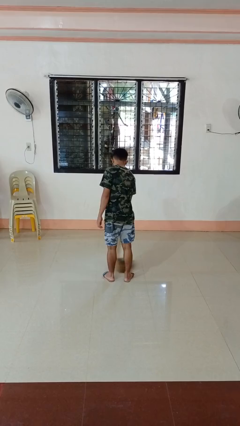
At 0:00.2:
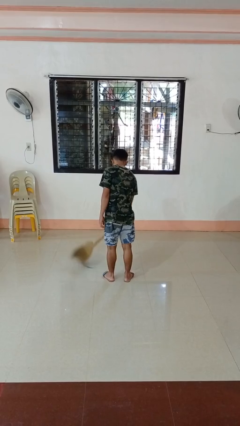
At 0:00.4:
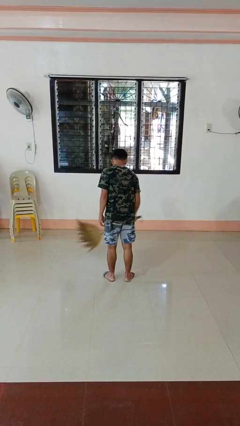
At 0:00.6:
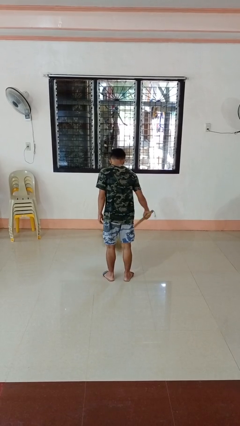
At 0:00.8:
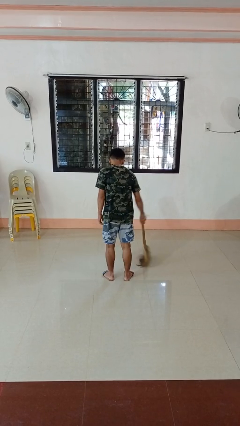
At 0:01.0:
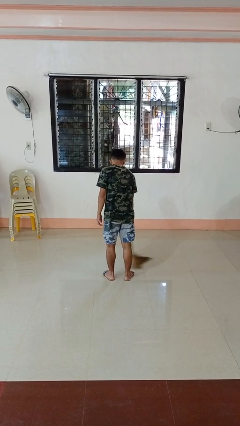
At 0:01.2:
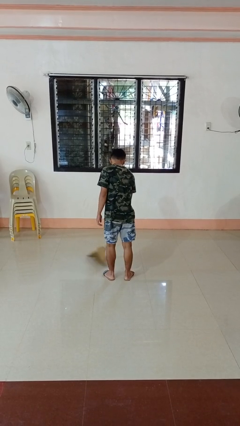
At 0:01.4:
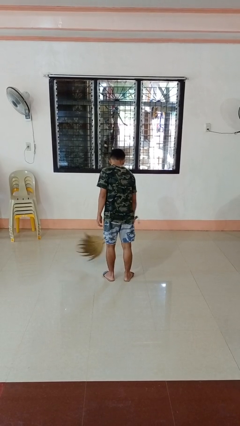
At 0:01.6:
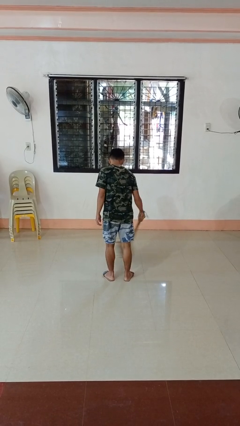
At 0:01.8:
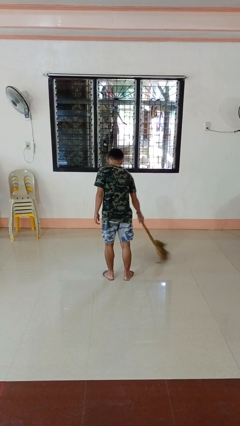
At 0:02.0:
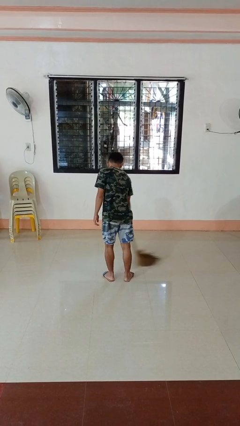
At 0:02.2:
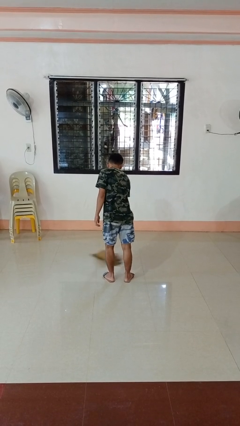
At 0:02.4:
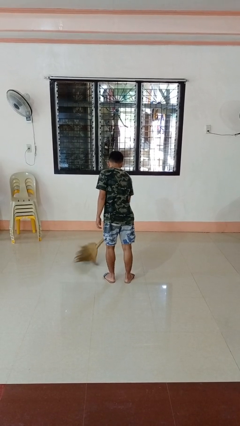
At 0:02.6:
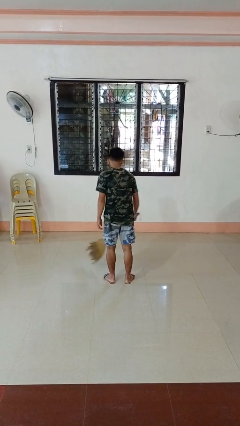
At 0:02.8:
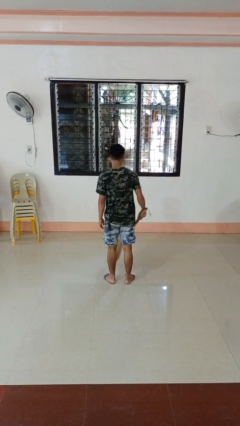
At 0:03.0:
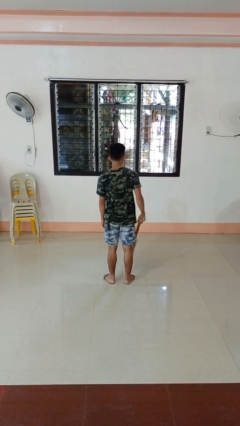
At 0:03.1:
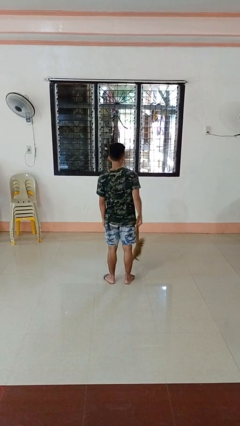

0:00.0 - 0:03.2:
person sweeps floor

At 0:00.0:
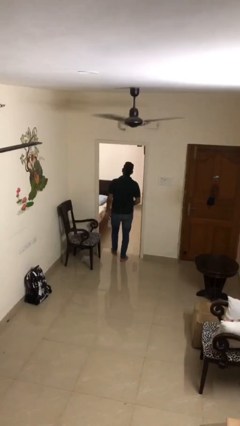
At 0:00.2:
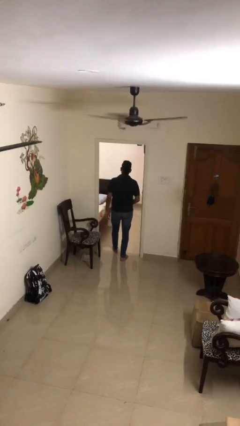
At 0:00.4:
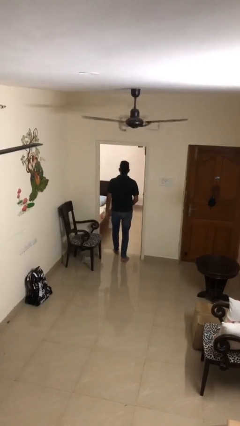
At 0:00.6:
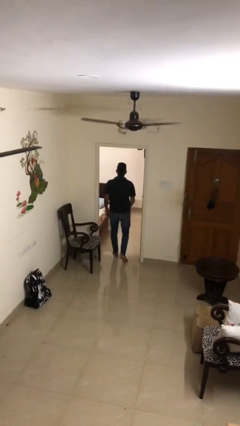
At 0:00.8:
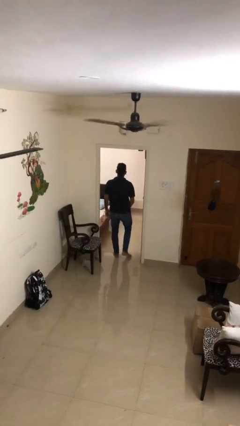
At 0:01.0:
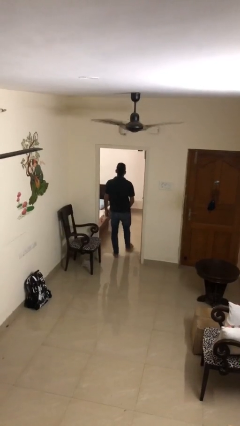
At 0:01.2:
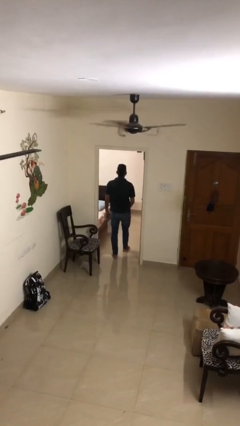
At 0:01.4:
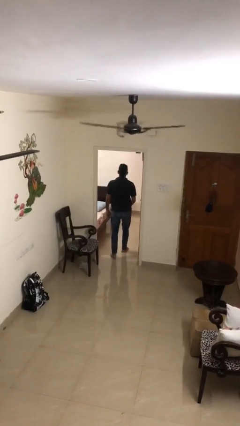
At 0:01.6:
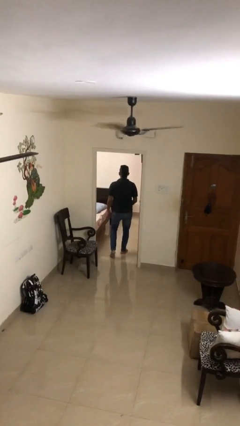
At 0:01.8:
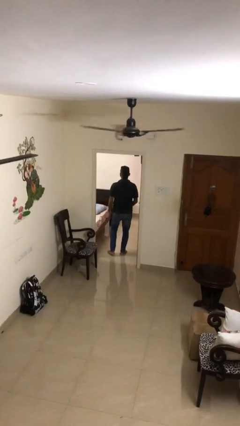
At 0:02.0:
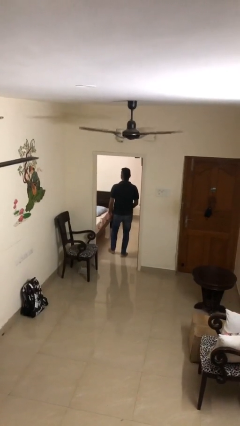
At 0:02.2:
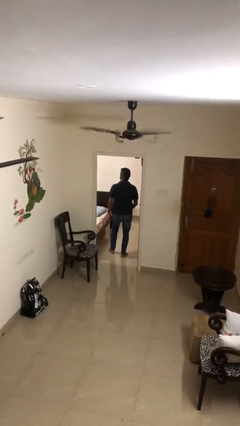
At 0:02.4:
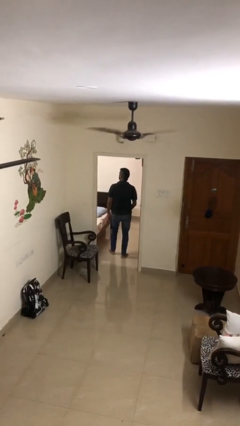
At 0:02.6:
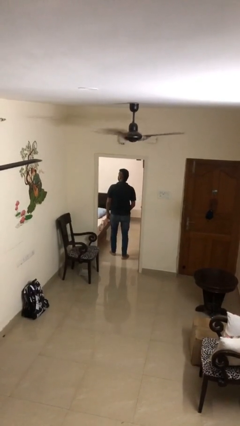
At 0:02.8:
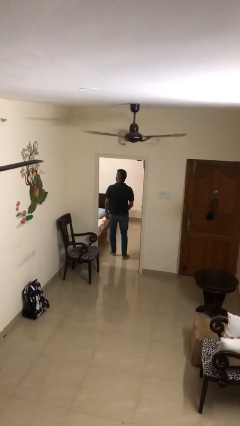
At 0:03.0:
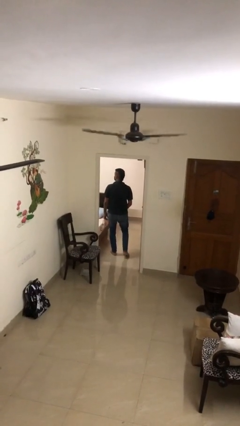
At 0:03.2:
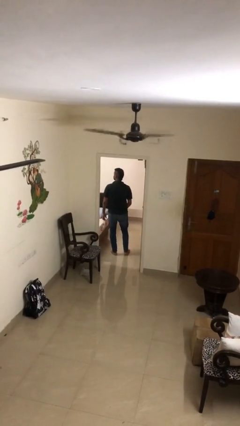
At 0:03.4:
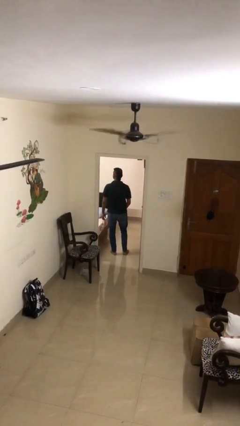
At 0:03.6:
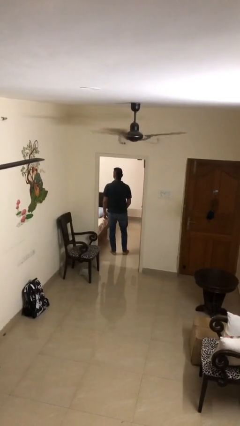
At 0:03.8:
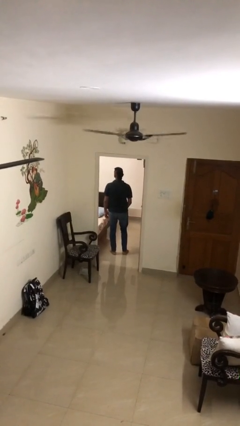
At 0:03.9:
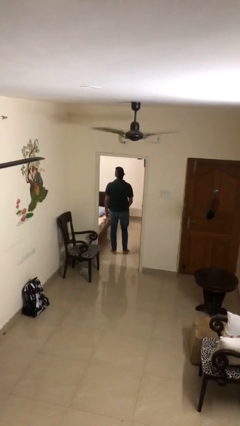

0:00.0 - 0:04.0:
person exits scene through structure

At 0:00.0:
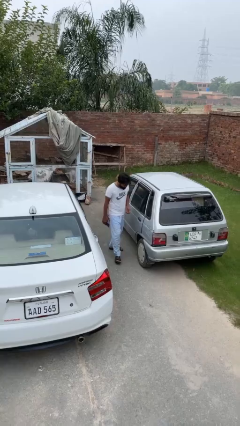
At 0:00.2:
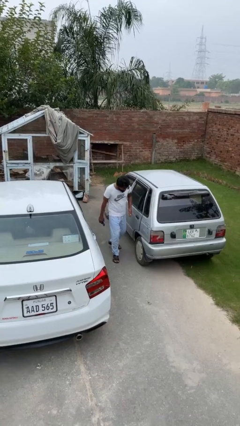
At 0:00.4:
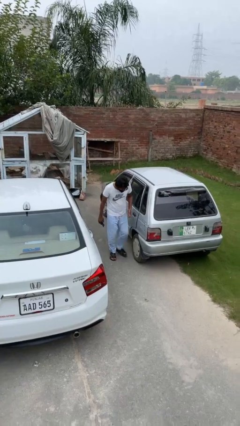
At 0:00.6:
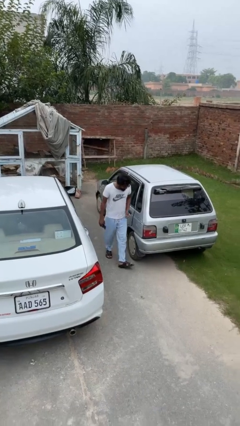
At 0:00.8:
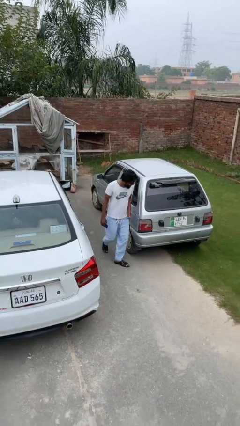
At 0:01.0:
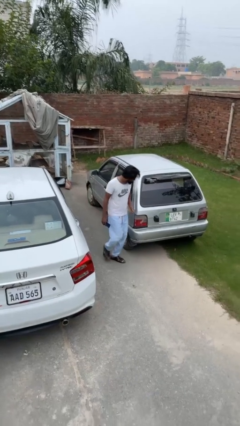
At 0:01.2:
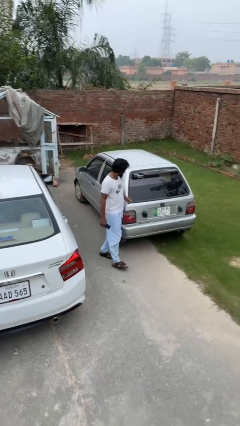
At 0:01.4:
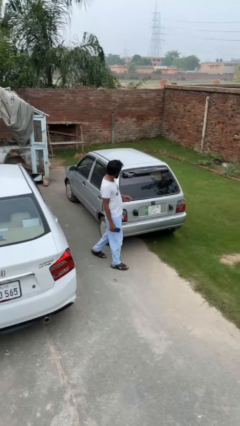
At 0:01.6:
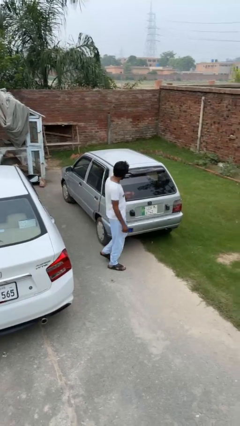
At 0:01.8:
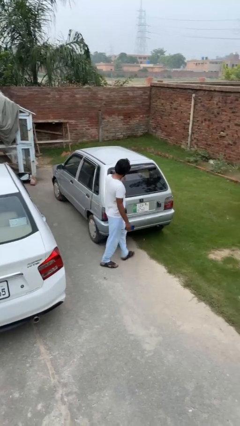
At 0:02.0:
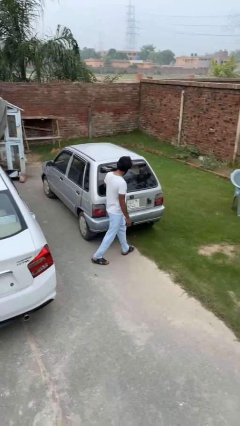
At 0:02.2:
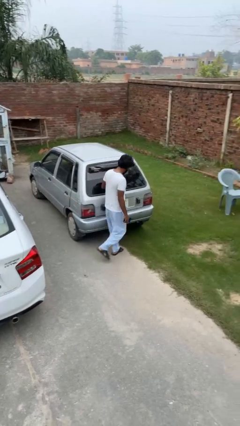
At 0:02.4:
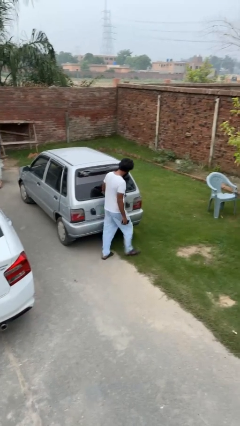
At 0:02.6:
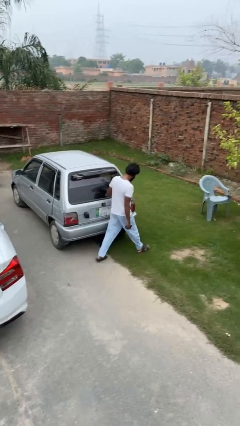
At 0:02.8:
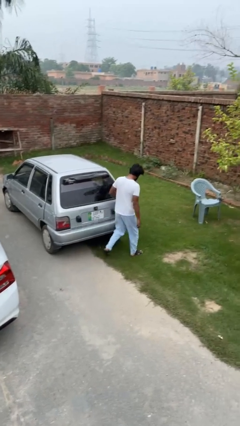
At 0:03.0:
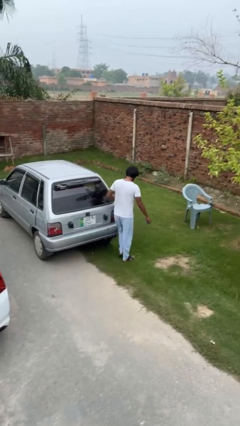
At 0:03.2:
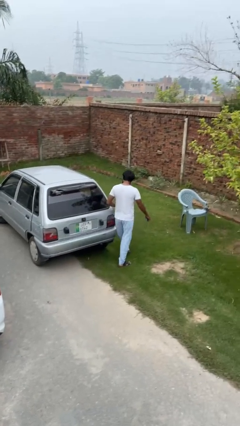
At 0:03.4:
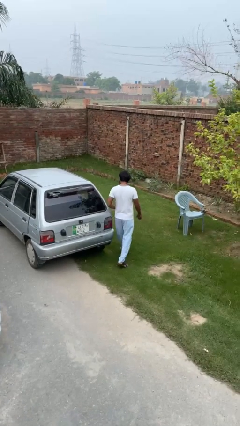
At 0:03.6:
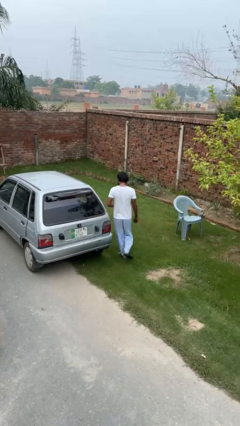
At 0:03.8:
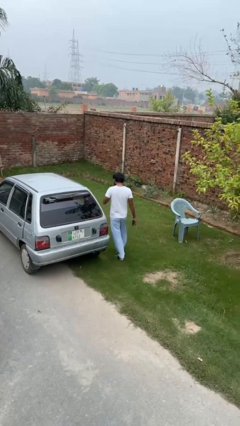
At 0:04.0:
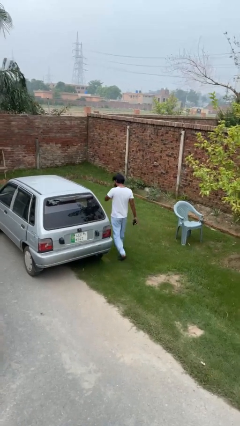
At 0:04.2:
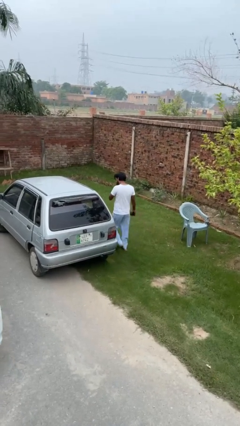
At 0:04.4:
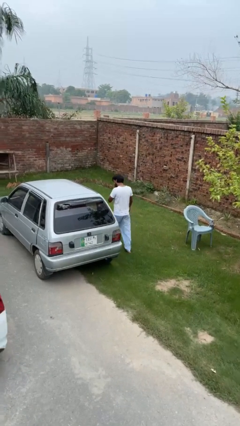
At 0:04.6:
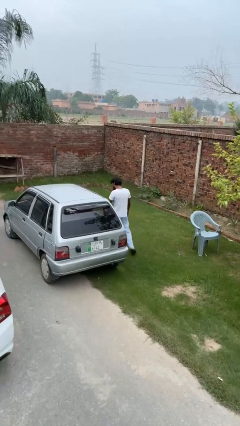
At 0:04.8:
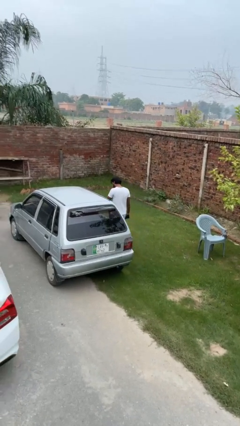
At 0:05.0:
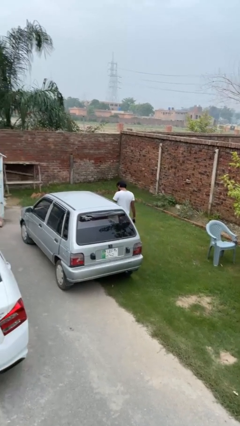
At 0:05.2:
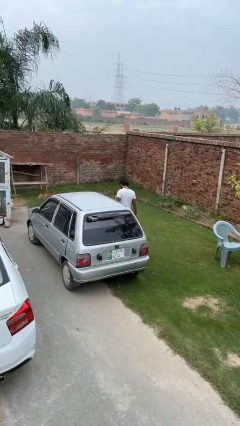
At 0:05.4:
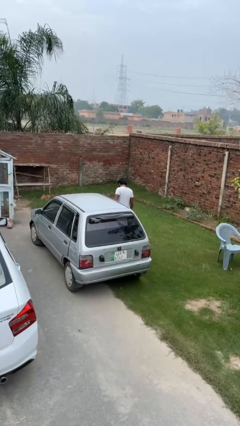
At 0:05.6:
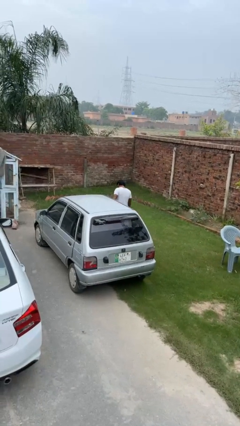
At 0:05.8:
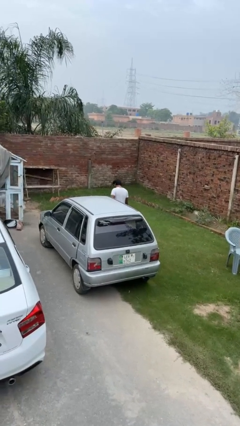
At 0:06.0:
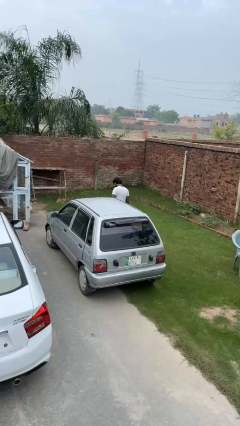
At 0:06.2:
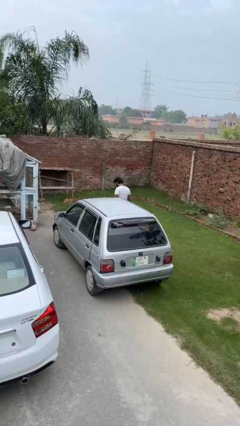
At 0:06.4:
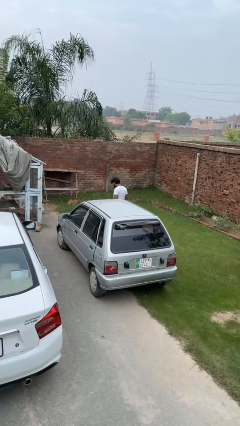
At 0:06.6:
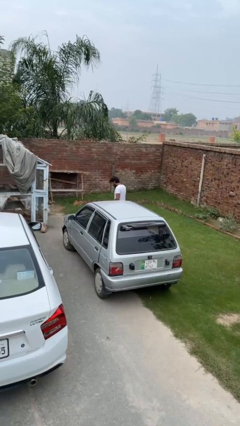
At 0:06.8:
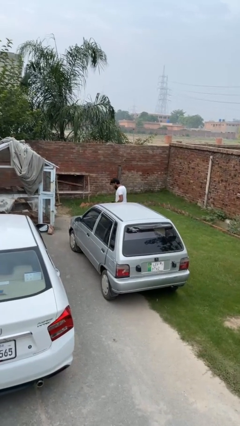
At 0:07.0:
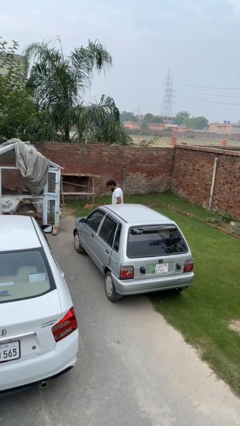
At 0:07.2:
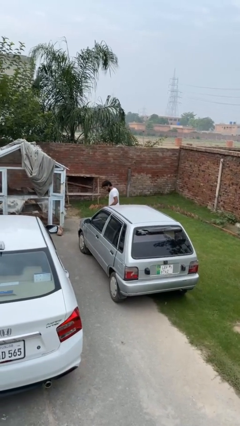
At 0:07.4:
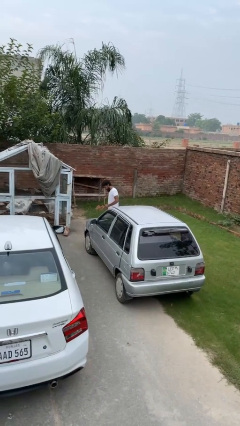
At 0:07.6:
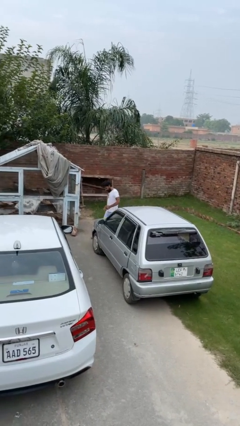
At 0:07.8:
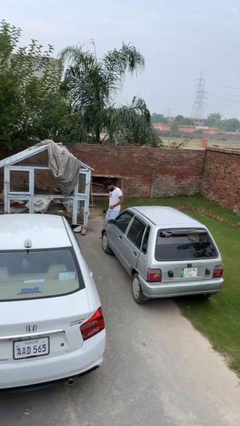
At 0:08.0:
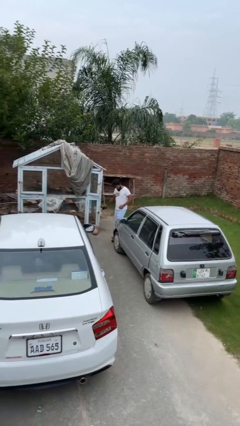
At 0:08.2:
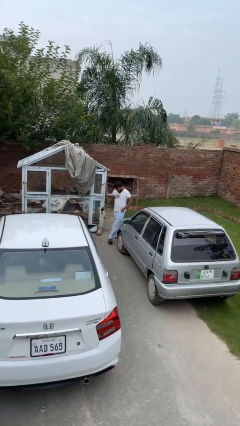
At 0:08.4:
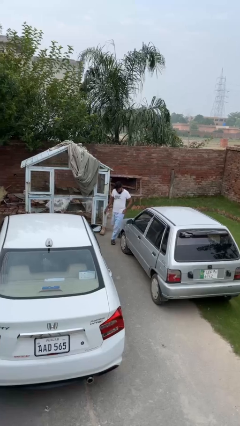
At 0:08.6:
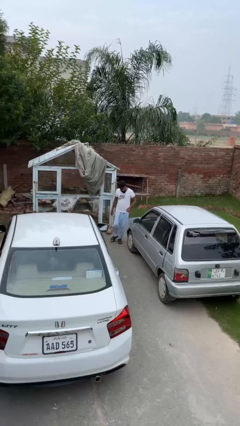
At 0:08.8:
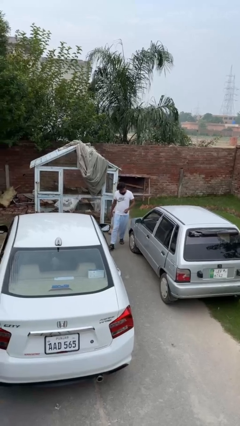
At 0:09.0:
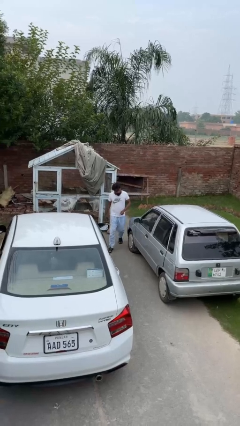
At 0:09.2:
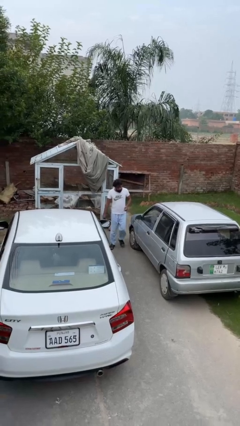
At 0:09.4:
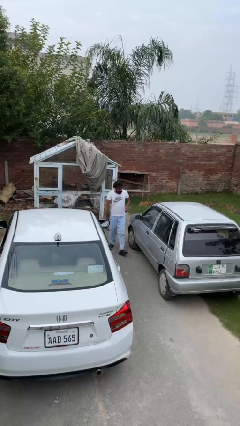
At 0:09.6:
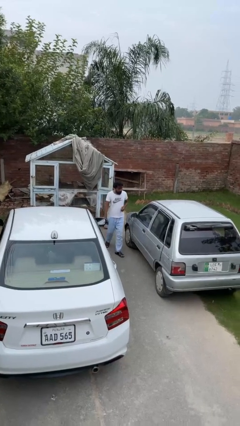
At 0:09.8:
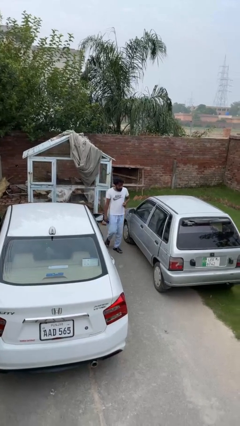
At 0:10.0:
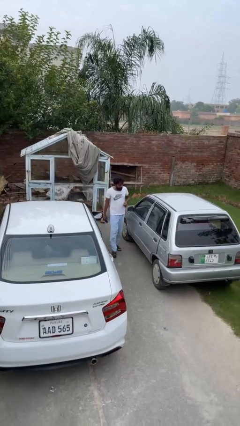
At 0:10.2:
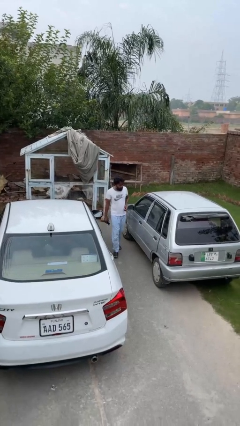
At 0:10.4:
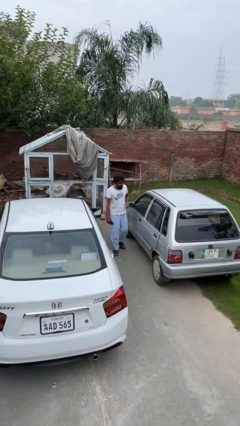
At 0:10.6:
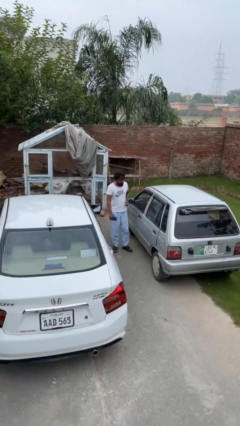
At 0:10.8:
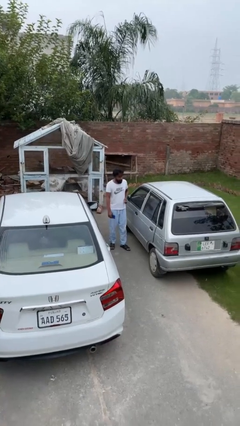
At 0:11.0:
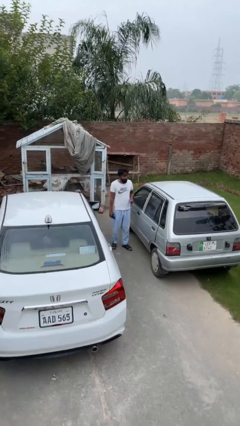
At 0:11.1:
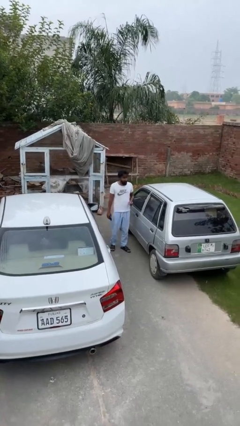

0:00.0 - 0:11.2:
person walks around car
